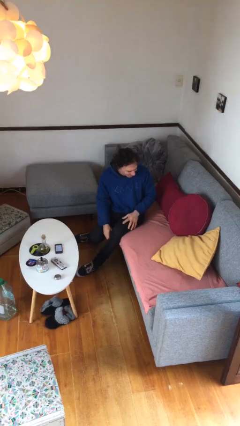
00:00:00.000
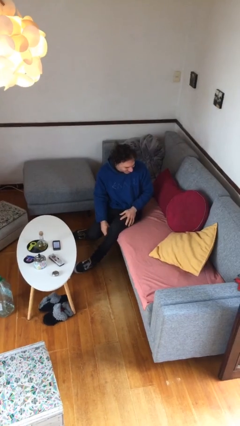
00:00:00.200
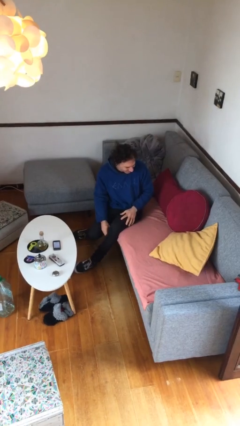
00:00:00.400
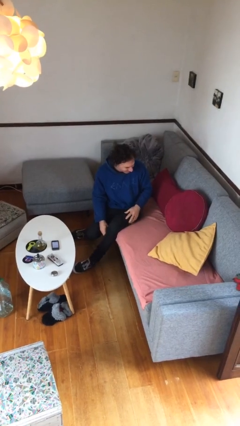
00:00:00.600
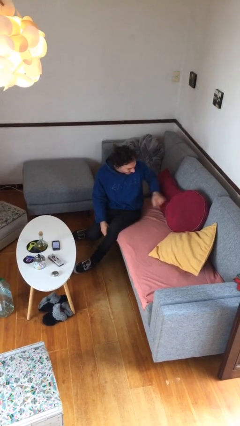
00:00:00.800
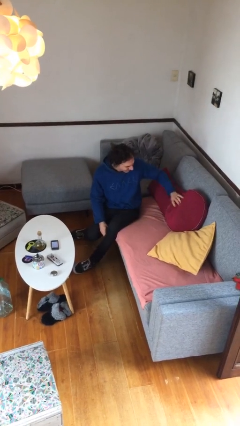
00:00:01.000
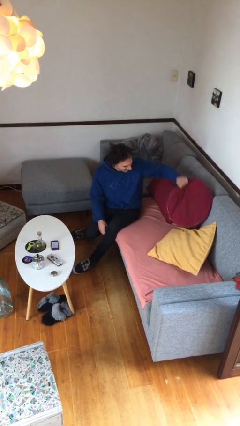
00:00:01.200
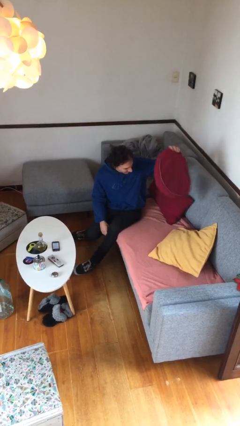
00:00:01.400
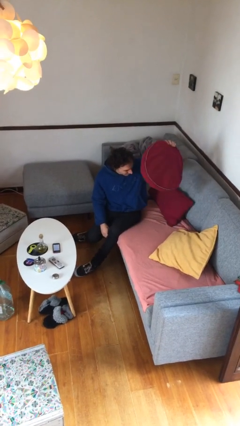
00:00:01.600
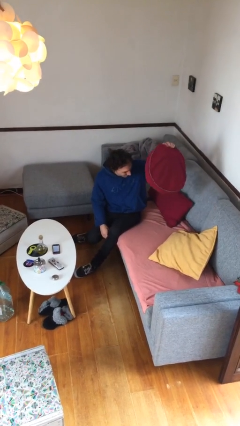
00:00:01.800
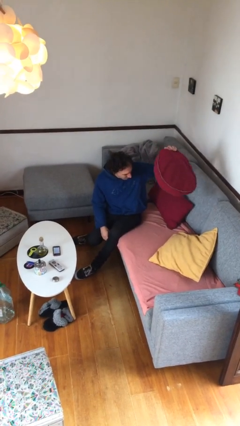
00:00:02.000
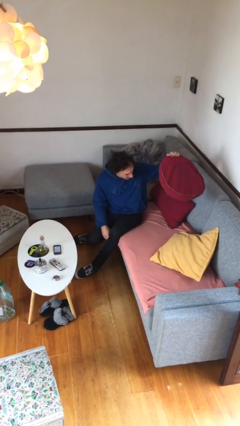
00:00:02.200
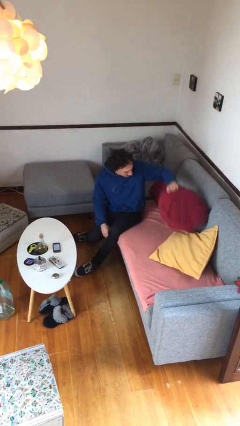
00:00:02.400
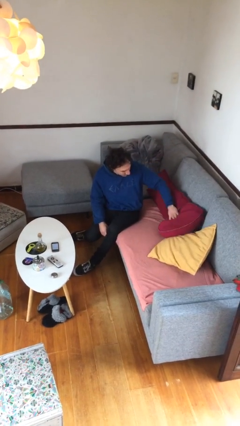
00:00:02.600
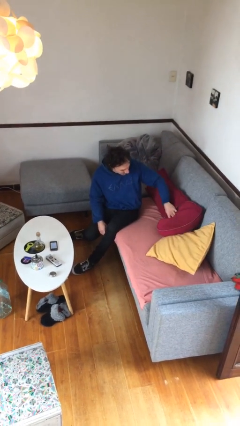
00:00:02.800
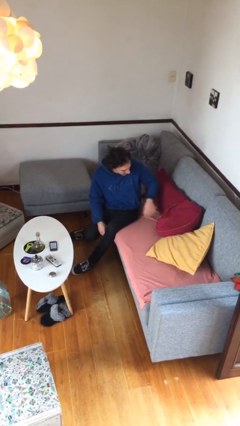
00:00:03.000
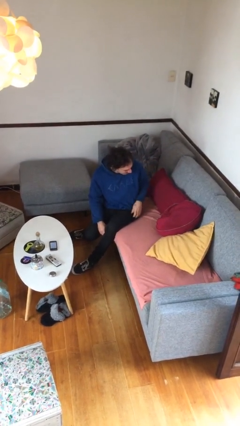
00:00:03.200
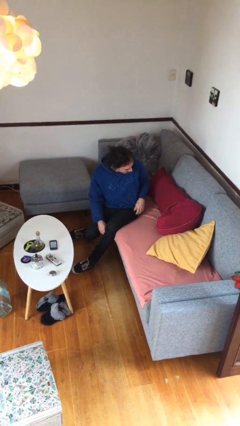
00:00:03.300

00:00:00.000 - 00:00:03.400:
person searches in couch

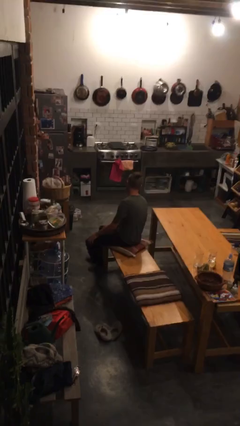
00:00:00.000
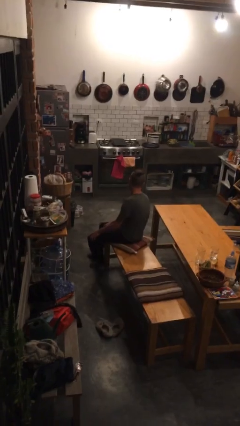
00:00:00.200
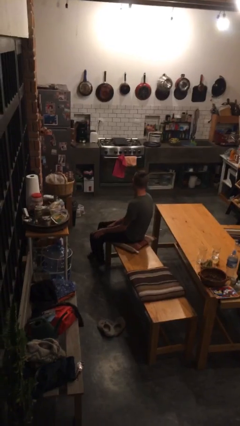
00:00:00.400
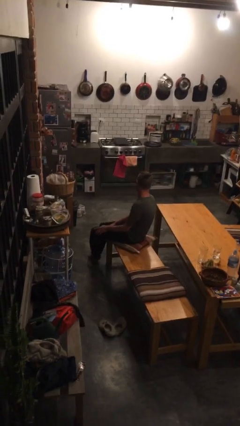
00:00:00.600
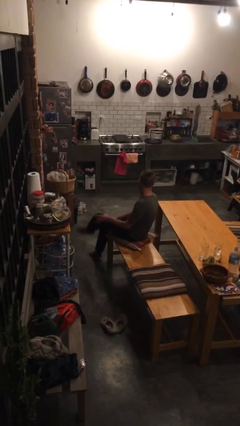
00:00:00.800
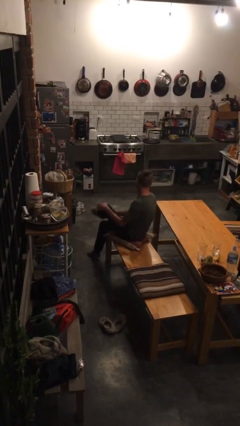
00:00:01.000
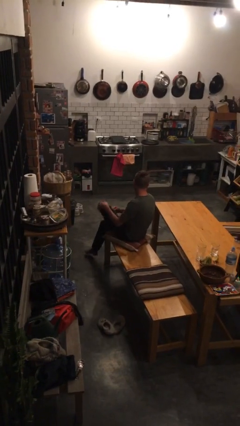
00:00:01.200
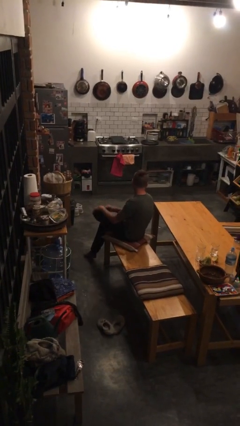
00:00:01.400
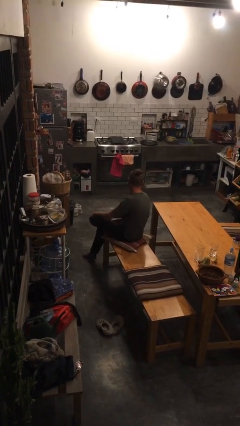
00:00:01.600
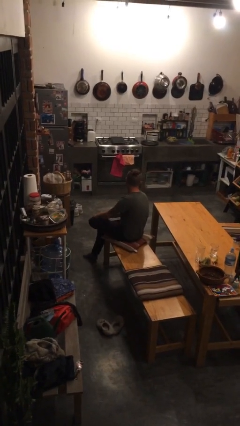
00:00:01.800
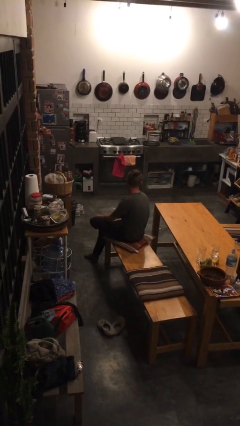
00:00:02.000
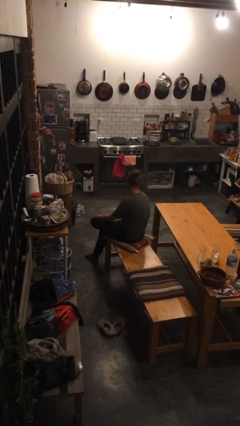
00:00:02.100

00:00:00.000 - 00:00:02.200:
person crosses legs

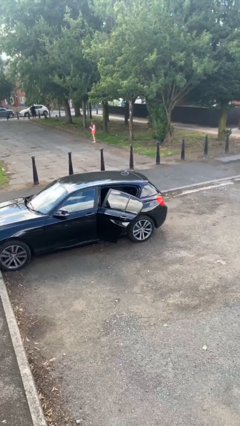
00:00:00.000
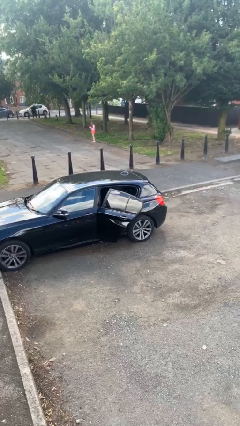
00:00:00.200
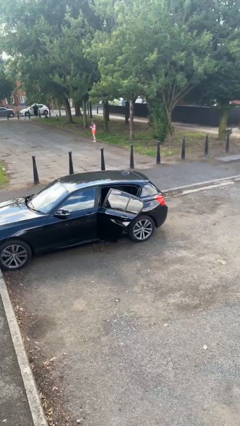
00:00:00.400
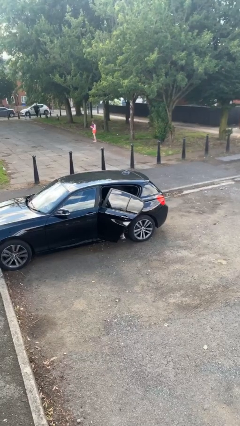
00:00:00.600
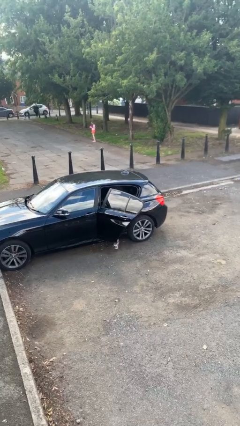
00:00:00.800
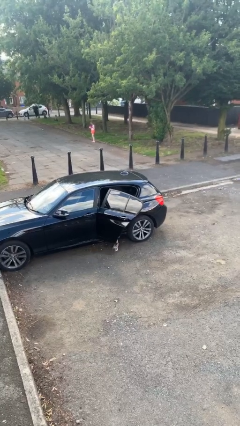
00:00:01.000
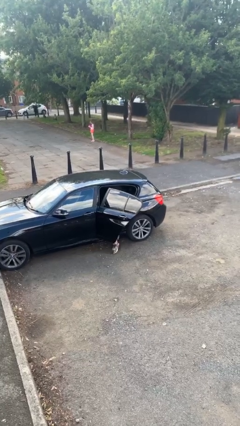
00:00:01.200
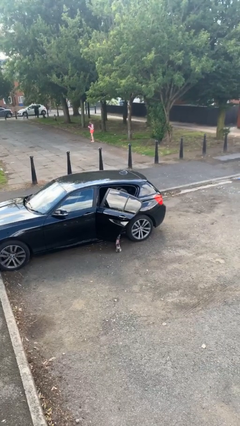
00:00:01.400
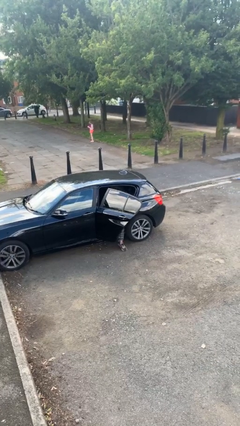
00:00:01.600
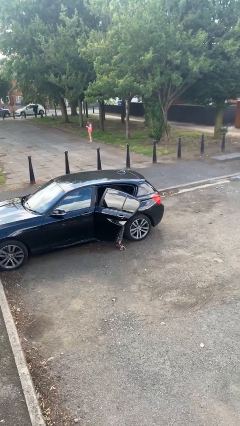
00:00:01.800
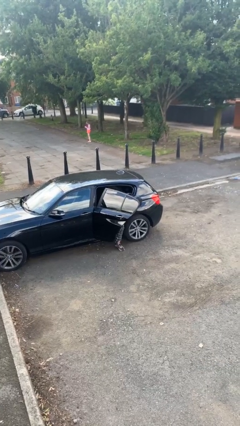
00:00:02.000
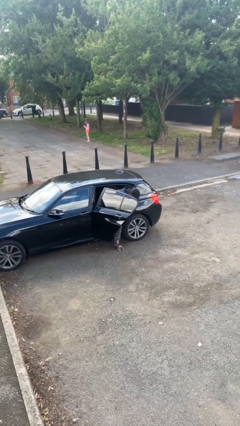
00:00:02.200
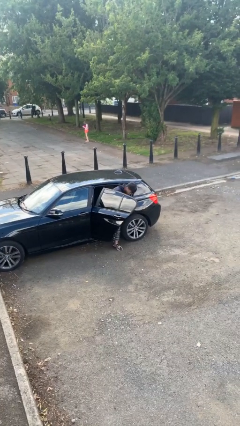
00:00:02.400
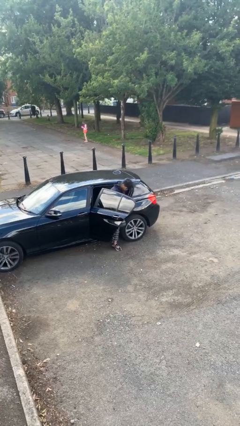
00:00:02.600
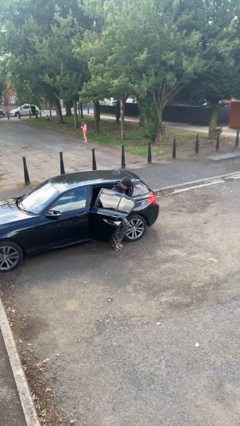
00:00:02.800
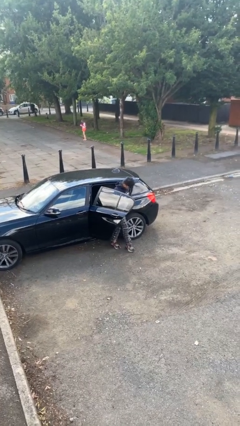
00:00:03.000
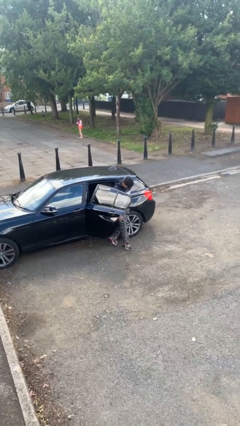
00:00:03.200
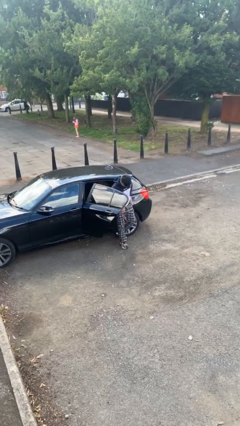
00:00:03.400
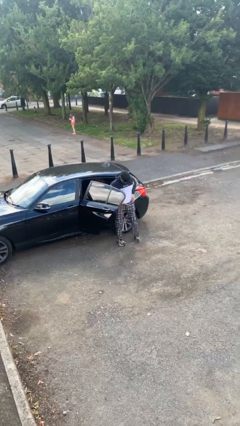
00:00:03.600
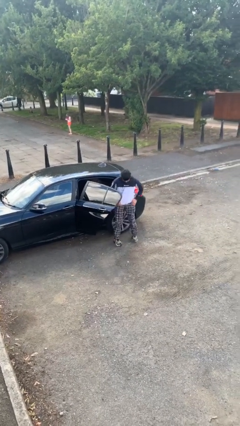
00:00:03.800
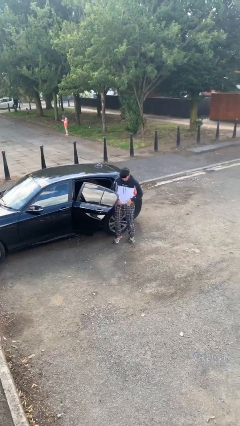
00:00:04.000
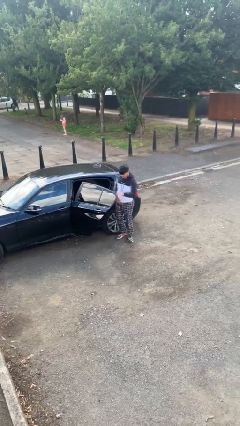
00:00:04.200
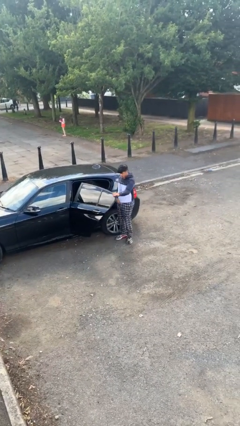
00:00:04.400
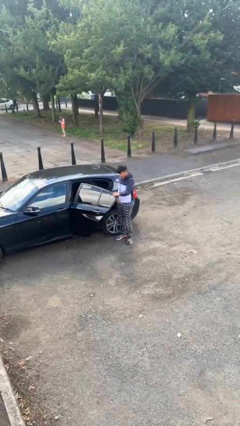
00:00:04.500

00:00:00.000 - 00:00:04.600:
person exits car

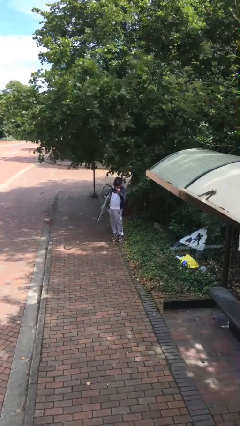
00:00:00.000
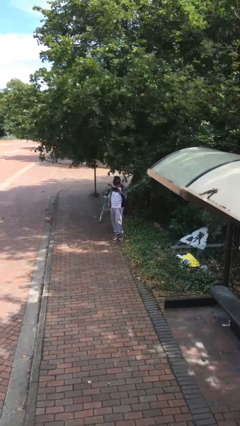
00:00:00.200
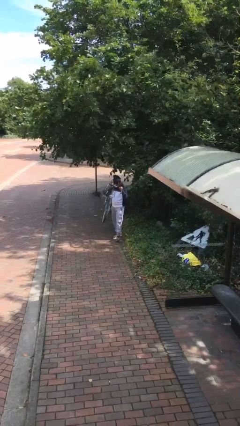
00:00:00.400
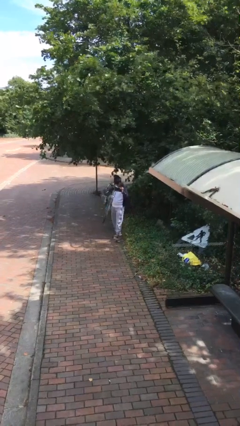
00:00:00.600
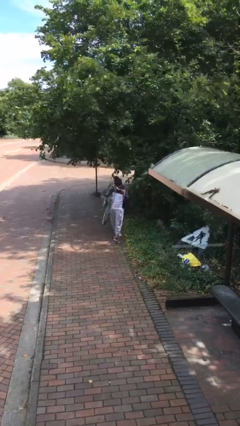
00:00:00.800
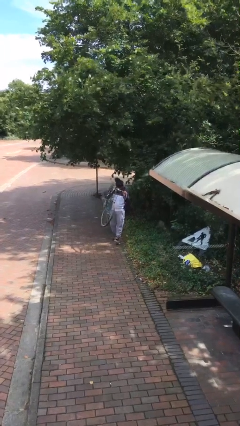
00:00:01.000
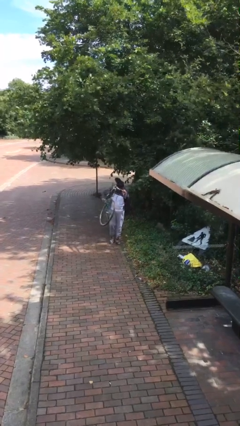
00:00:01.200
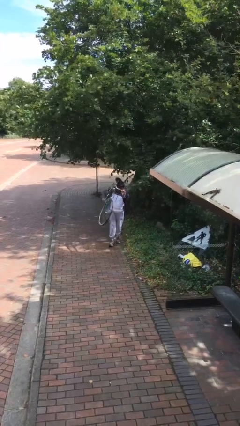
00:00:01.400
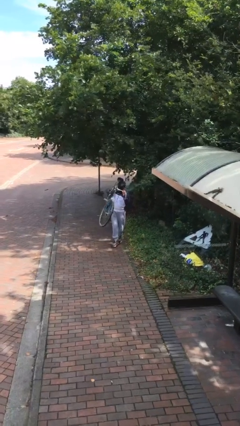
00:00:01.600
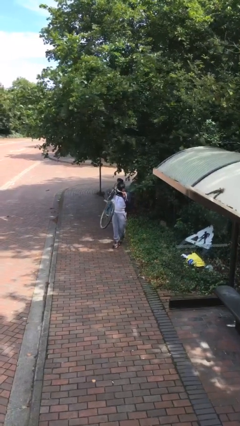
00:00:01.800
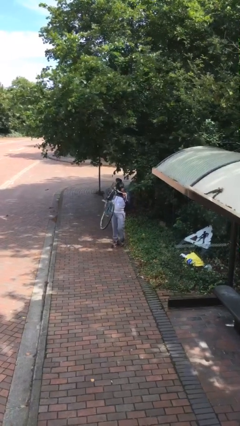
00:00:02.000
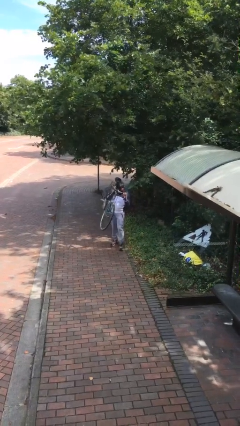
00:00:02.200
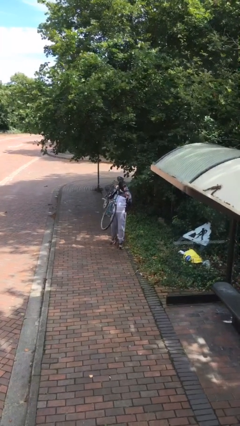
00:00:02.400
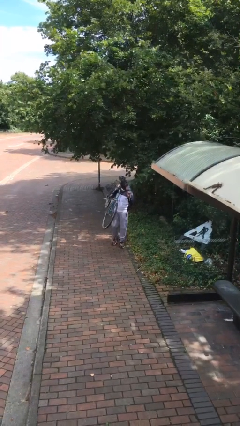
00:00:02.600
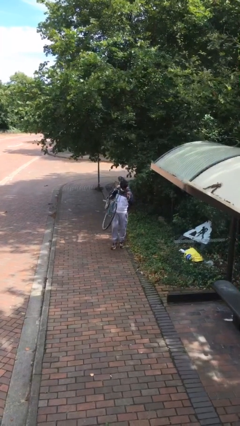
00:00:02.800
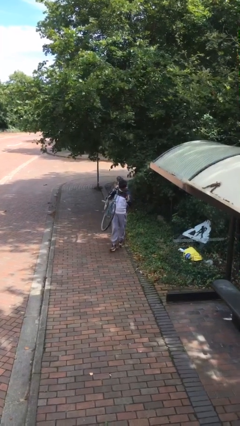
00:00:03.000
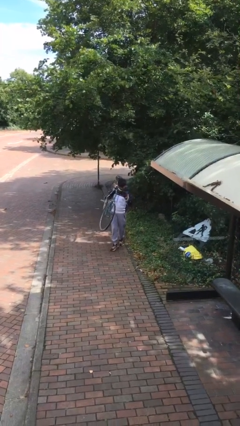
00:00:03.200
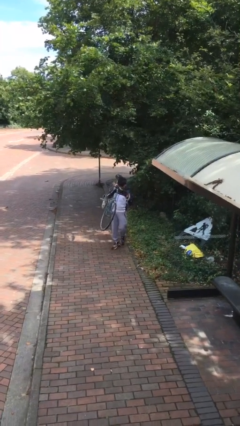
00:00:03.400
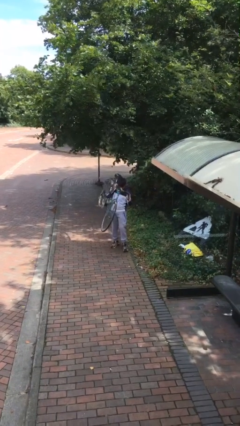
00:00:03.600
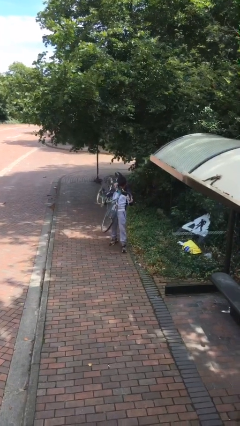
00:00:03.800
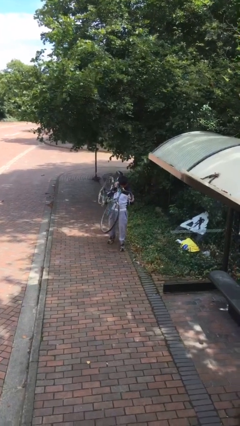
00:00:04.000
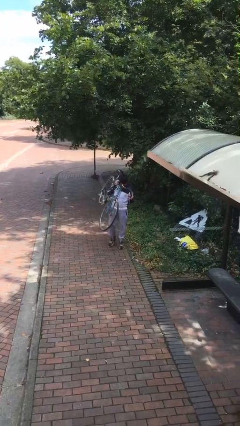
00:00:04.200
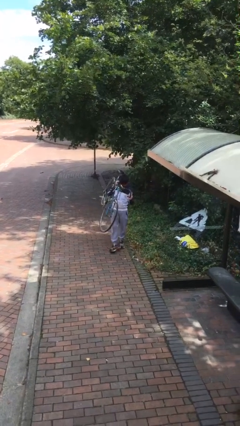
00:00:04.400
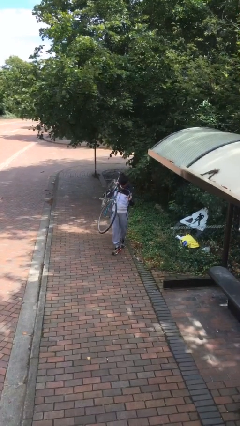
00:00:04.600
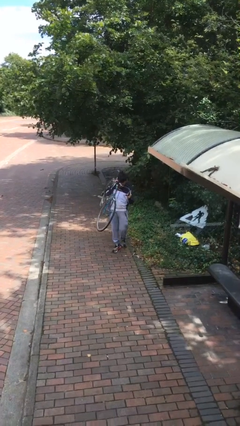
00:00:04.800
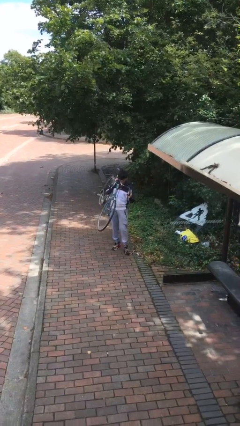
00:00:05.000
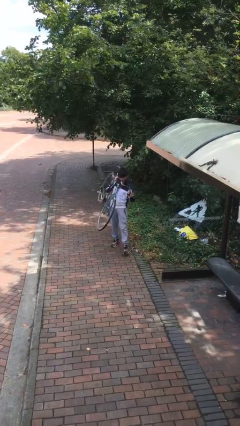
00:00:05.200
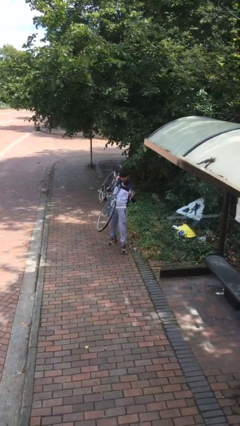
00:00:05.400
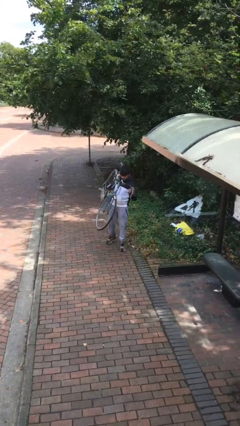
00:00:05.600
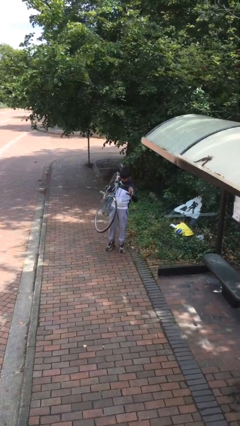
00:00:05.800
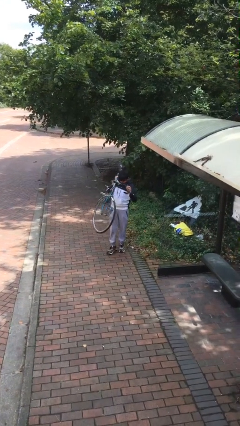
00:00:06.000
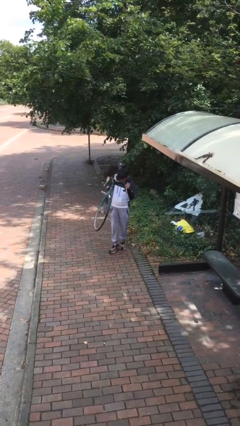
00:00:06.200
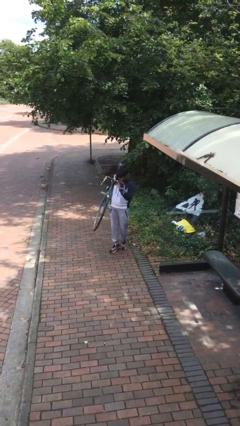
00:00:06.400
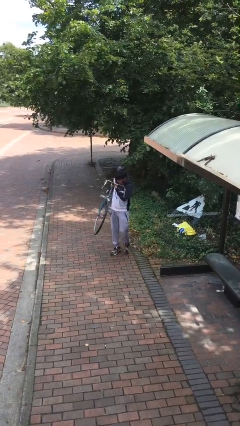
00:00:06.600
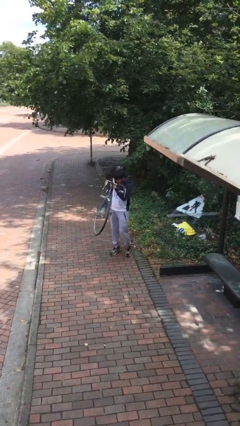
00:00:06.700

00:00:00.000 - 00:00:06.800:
person carries heavy object

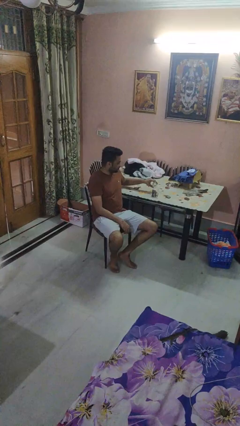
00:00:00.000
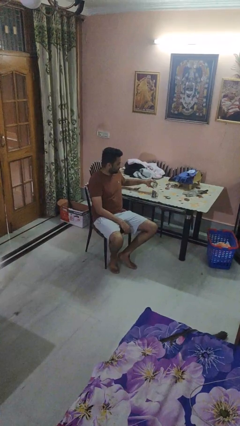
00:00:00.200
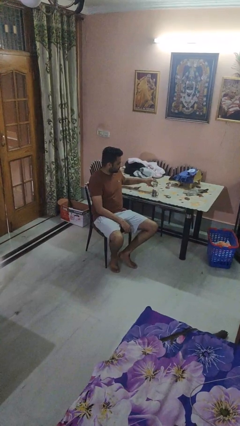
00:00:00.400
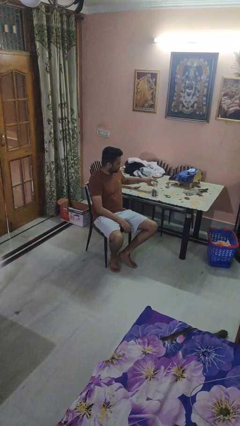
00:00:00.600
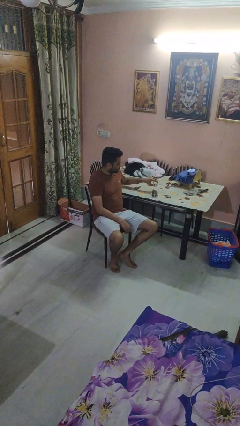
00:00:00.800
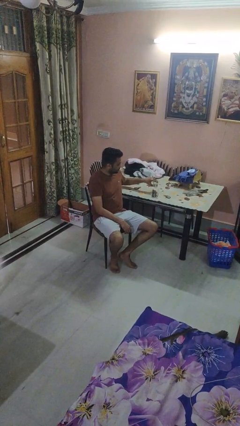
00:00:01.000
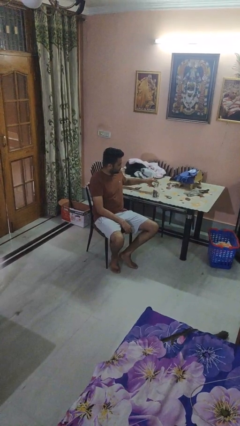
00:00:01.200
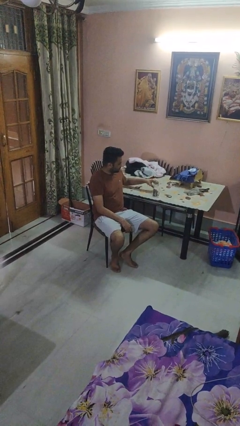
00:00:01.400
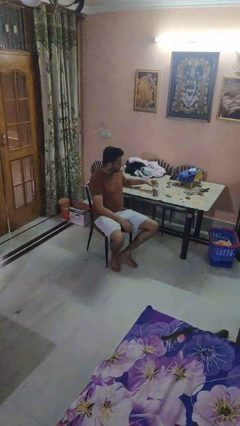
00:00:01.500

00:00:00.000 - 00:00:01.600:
person pours liquid into cup
